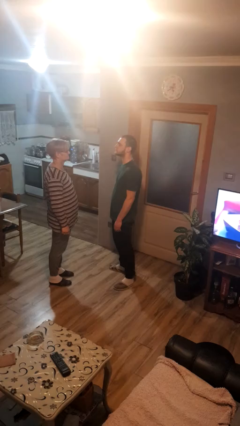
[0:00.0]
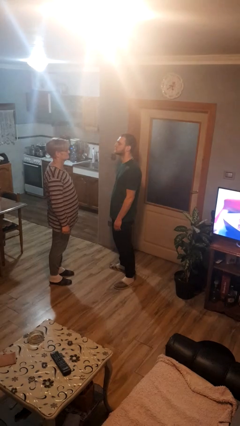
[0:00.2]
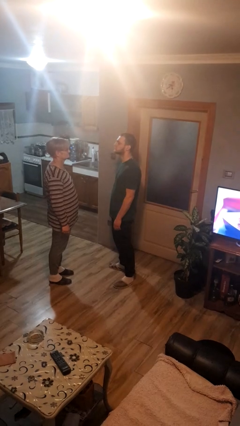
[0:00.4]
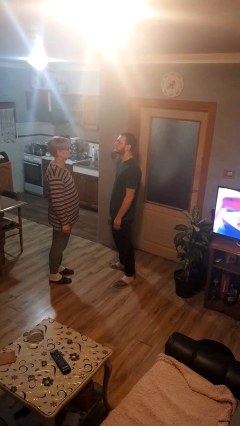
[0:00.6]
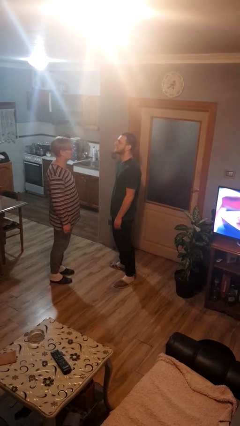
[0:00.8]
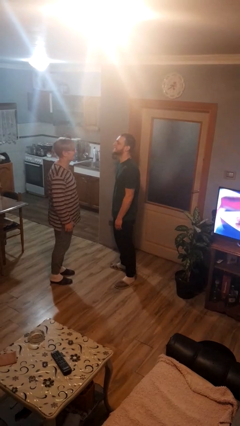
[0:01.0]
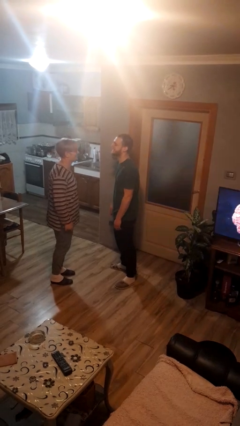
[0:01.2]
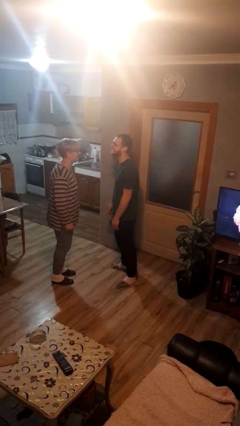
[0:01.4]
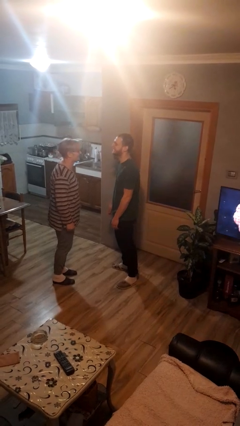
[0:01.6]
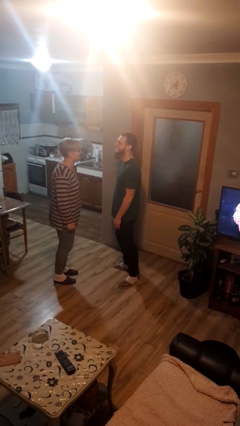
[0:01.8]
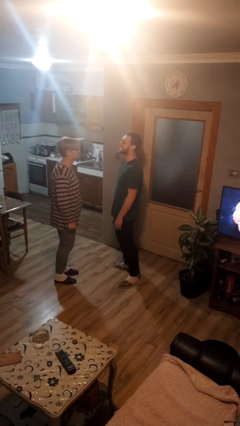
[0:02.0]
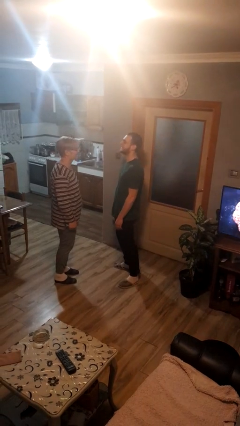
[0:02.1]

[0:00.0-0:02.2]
person laughs with person

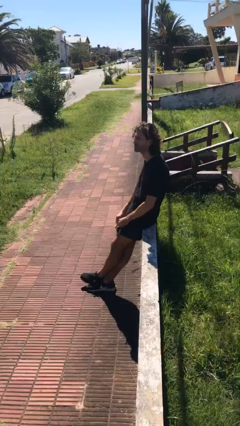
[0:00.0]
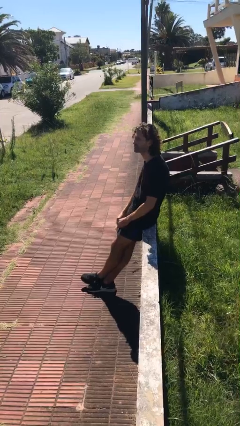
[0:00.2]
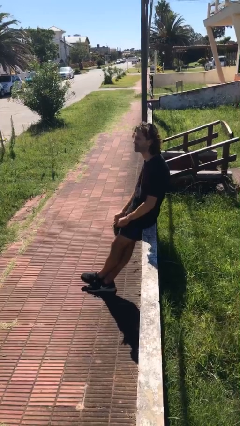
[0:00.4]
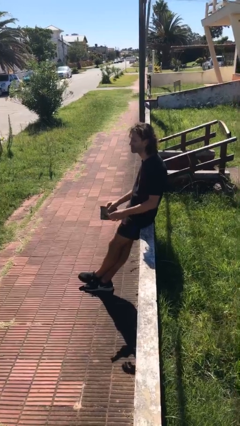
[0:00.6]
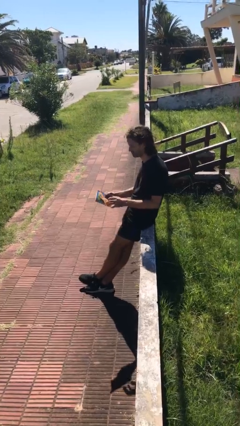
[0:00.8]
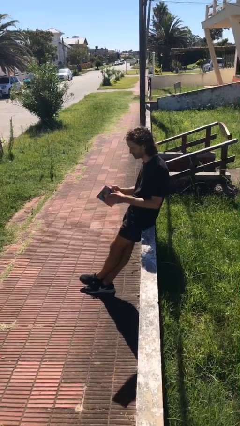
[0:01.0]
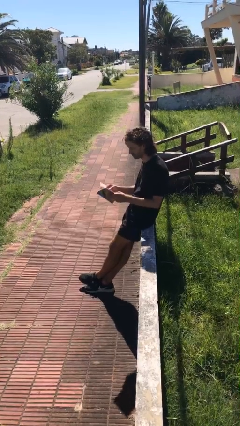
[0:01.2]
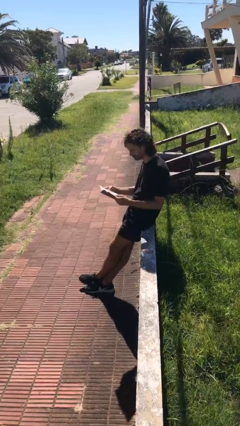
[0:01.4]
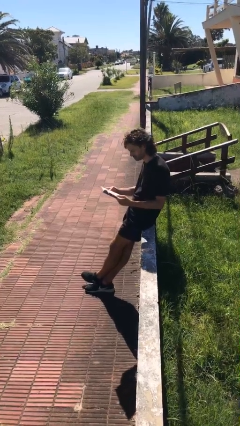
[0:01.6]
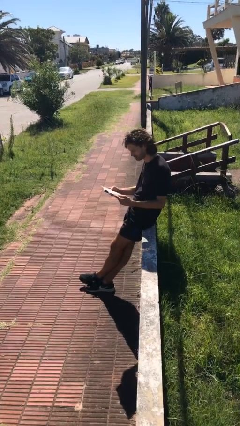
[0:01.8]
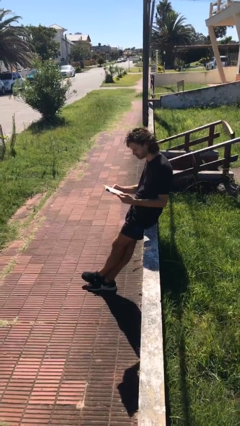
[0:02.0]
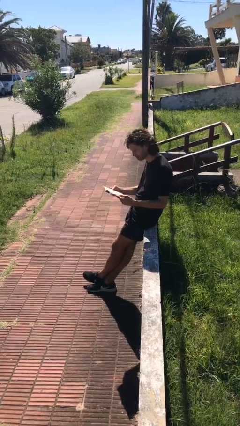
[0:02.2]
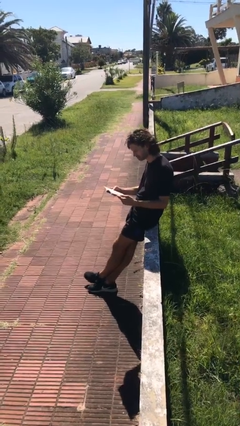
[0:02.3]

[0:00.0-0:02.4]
person reads document

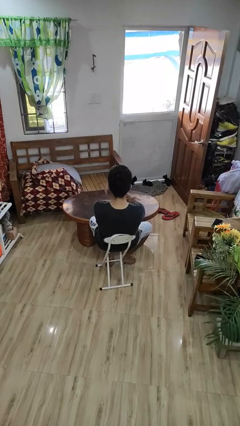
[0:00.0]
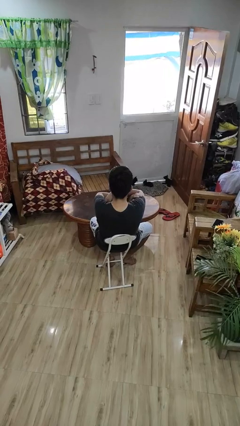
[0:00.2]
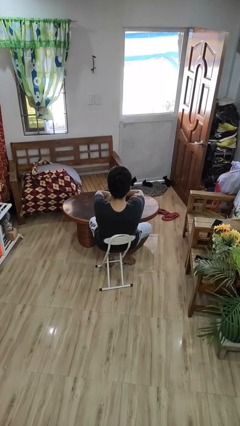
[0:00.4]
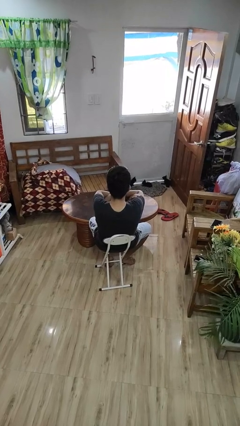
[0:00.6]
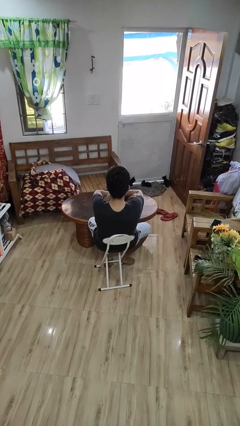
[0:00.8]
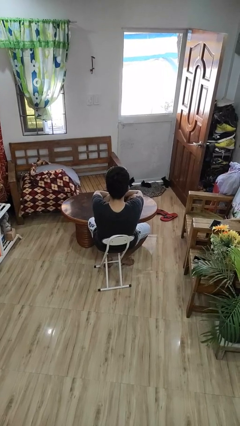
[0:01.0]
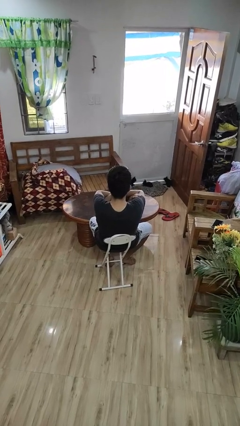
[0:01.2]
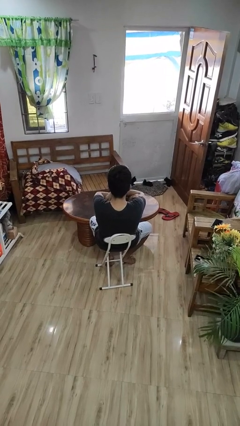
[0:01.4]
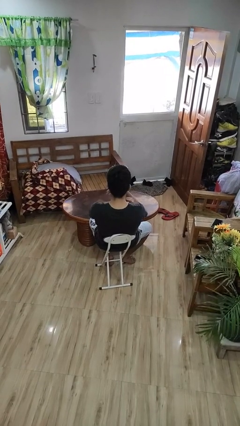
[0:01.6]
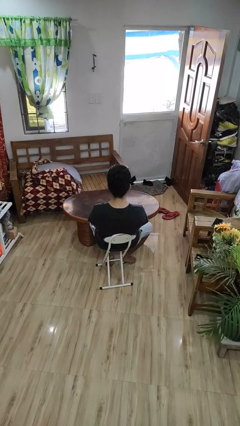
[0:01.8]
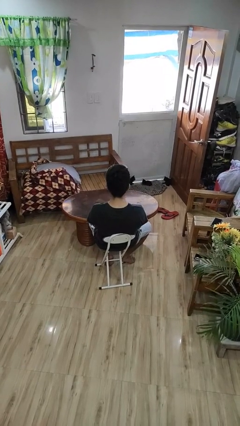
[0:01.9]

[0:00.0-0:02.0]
person crosses arms

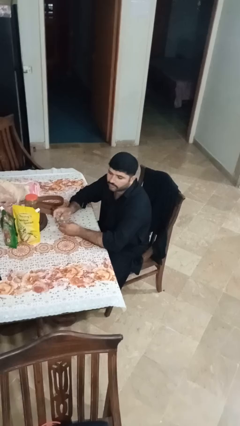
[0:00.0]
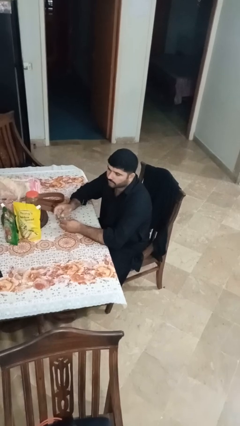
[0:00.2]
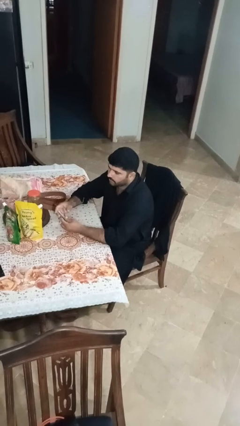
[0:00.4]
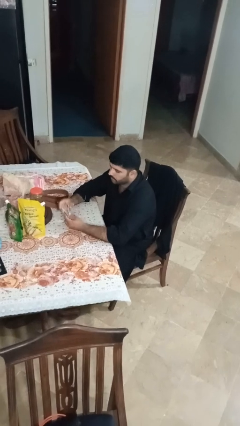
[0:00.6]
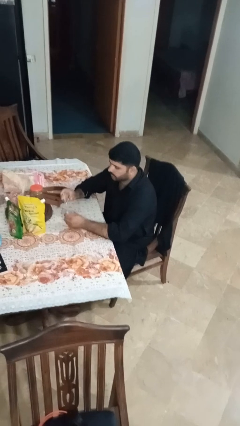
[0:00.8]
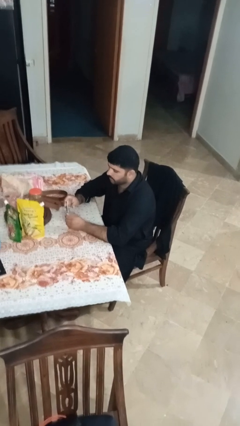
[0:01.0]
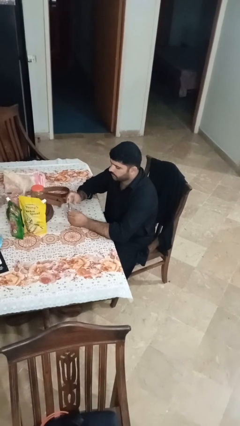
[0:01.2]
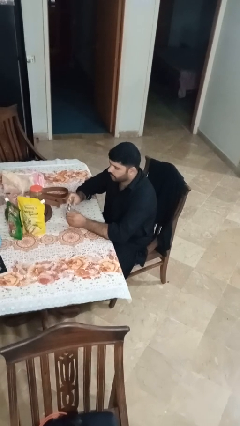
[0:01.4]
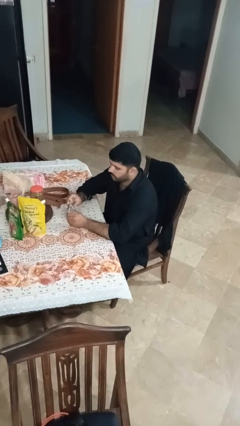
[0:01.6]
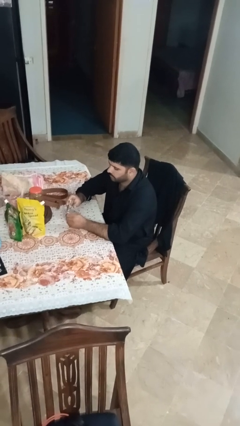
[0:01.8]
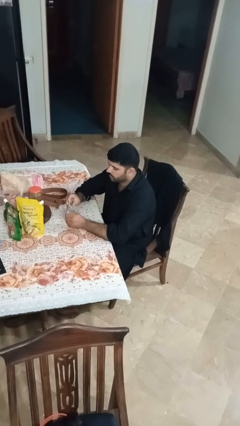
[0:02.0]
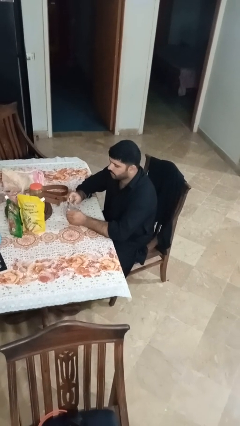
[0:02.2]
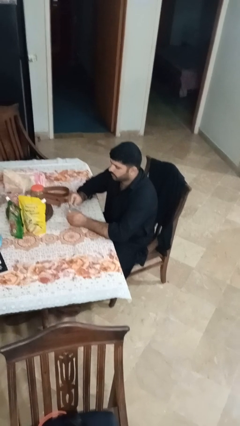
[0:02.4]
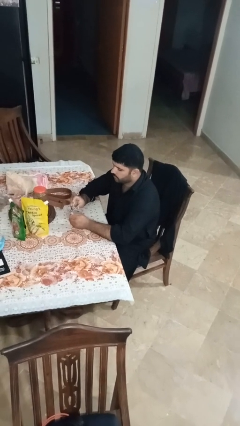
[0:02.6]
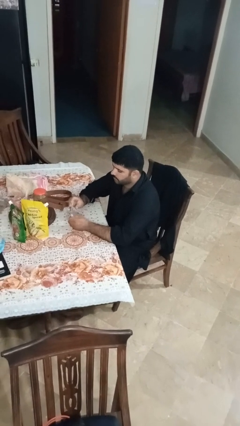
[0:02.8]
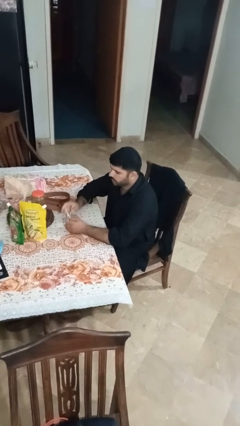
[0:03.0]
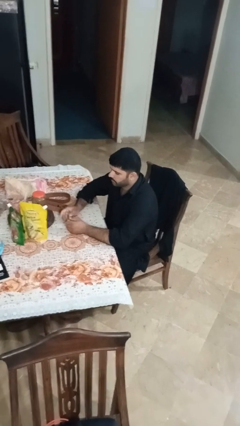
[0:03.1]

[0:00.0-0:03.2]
person clips fingernails

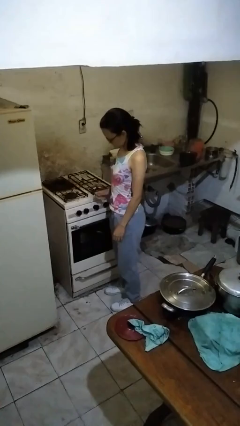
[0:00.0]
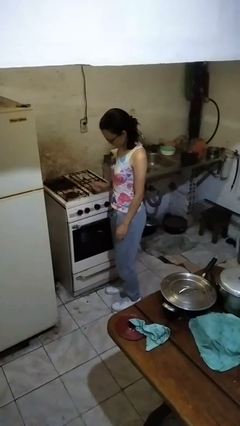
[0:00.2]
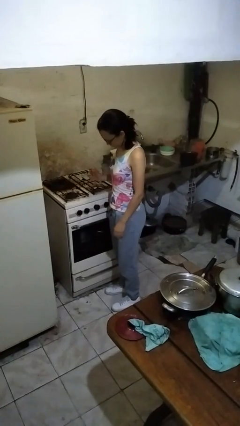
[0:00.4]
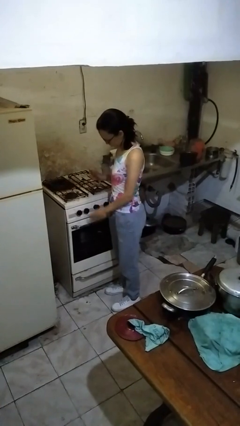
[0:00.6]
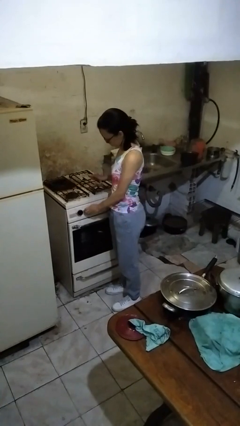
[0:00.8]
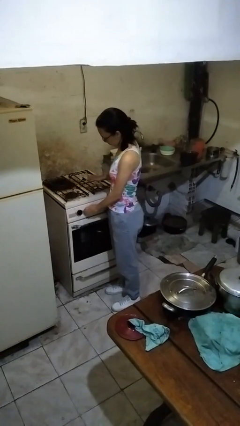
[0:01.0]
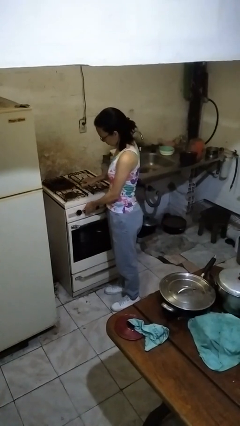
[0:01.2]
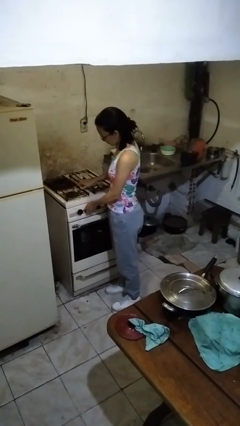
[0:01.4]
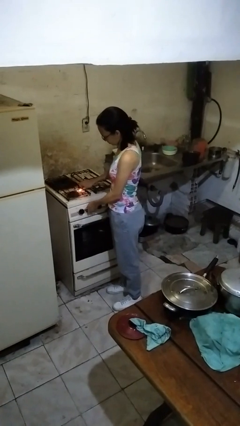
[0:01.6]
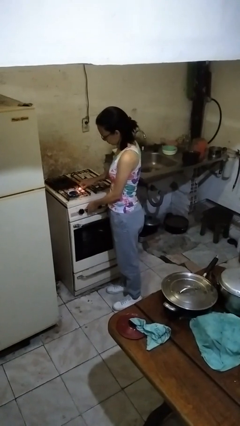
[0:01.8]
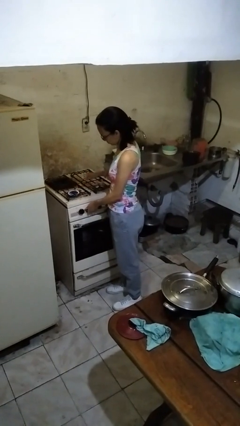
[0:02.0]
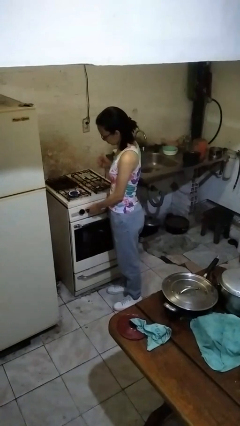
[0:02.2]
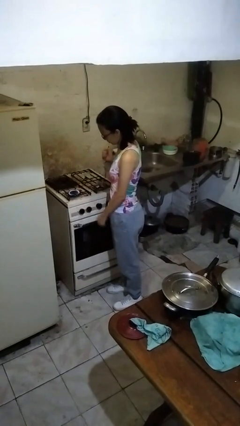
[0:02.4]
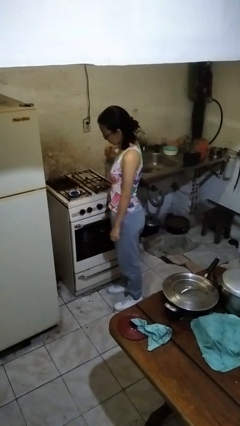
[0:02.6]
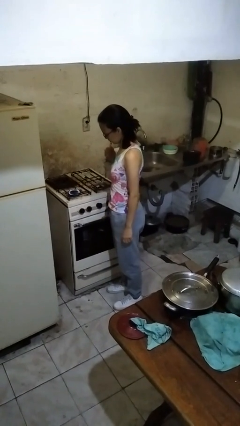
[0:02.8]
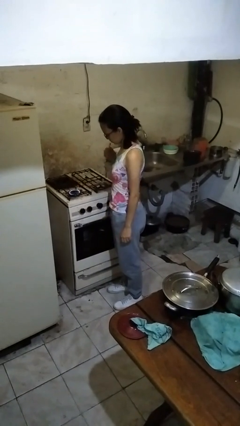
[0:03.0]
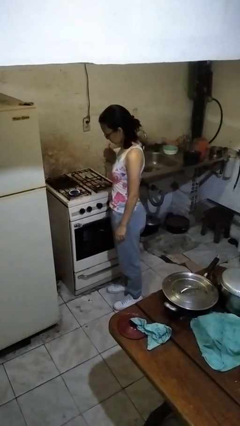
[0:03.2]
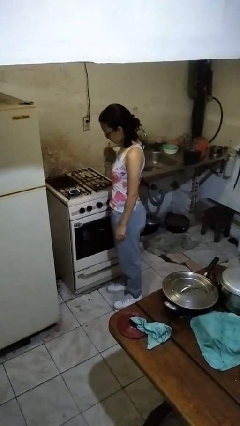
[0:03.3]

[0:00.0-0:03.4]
person turns on stovetop

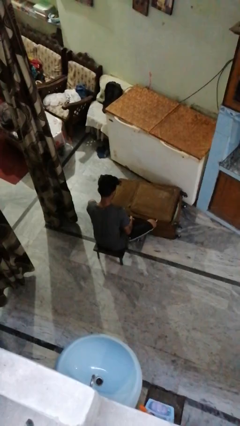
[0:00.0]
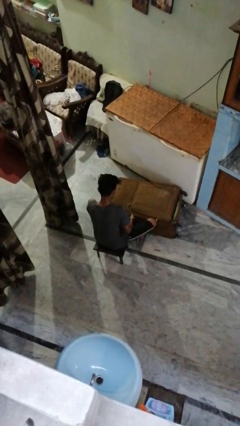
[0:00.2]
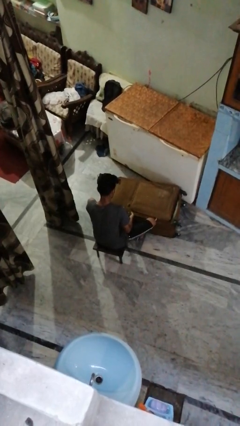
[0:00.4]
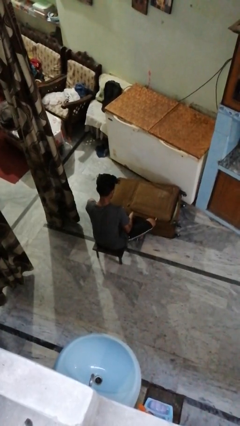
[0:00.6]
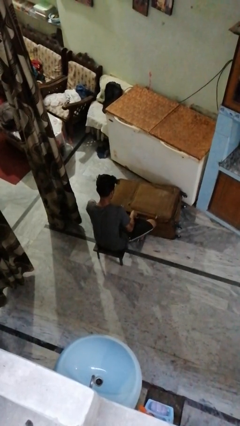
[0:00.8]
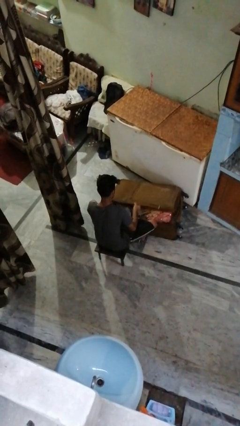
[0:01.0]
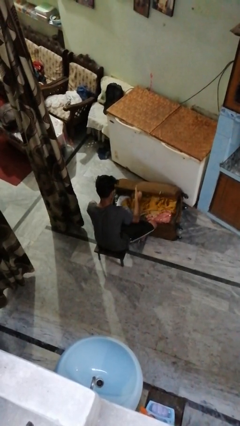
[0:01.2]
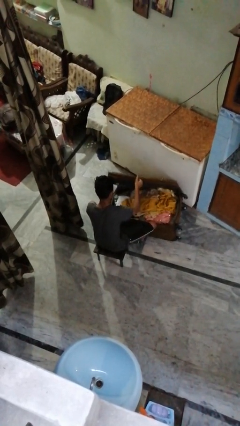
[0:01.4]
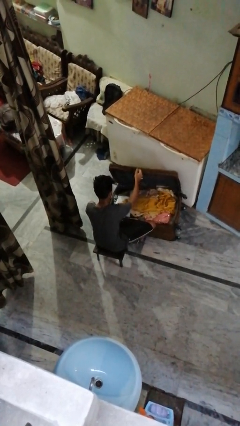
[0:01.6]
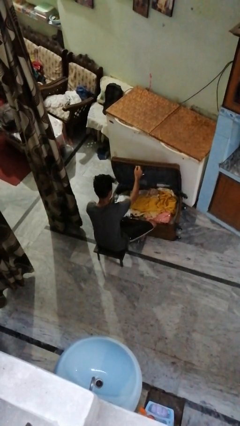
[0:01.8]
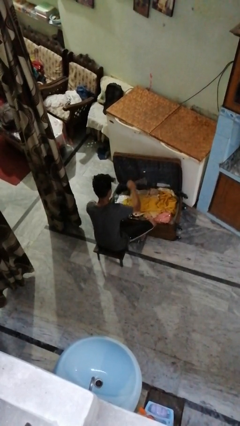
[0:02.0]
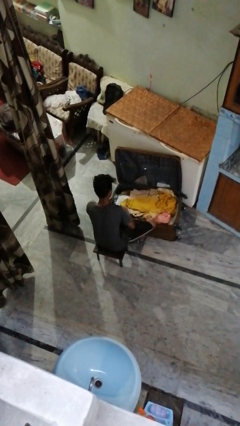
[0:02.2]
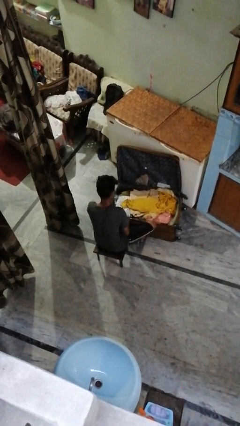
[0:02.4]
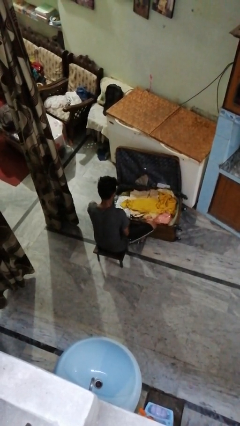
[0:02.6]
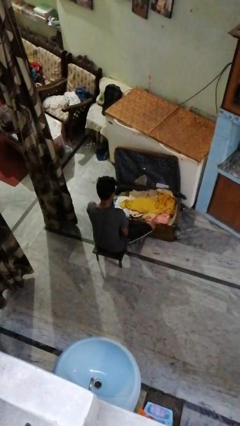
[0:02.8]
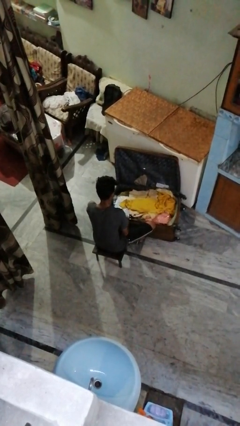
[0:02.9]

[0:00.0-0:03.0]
person opens suitcase

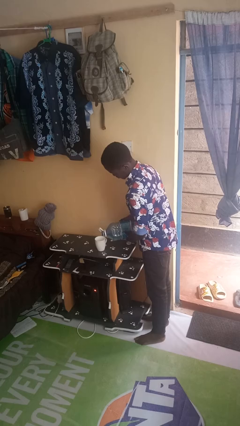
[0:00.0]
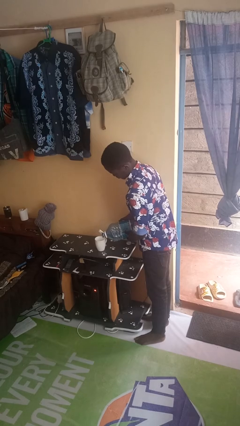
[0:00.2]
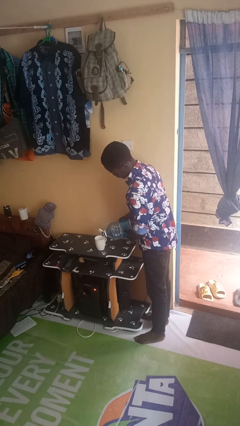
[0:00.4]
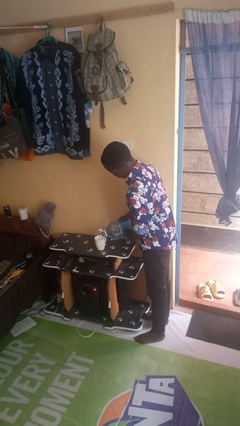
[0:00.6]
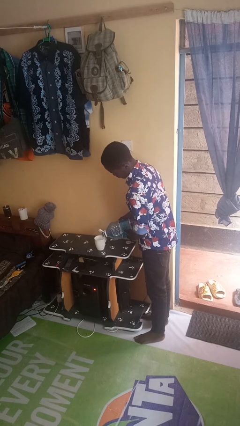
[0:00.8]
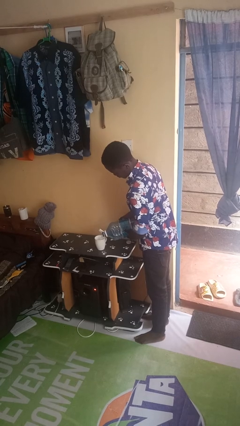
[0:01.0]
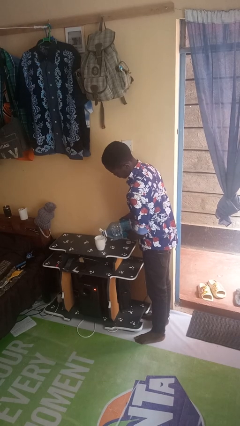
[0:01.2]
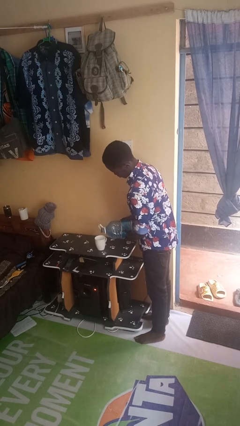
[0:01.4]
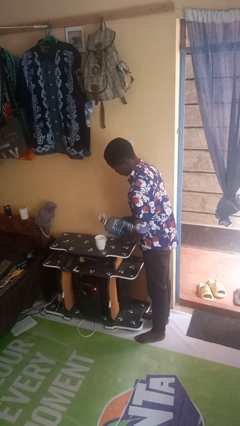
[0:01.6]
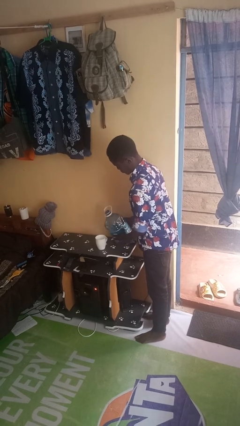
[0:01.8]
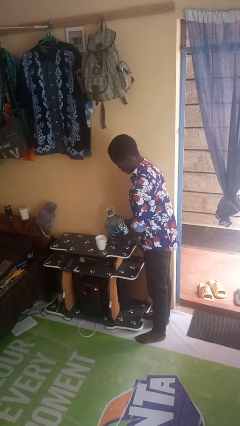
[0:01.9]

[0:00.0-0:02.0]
person pours liquid into cup
